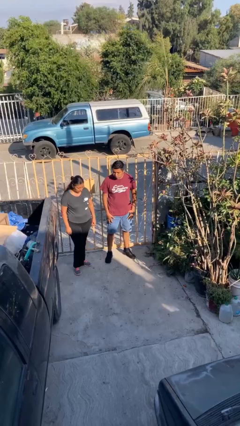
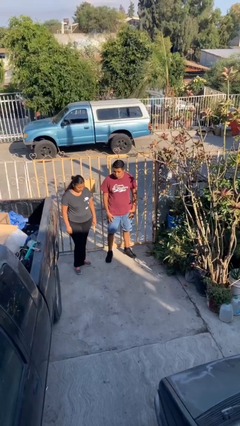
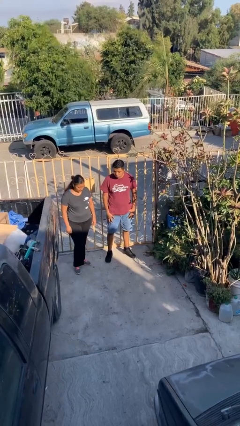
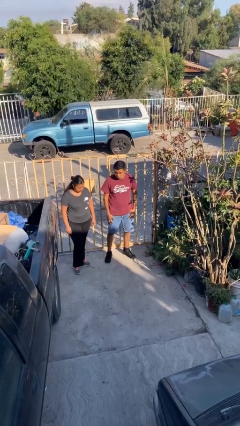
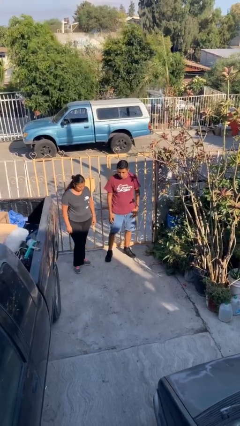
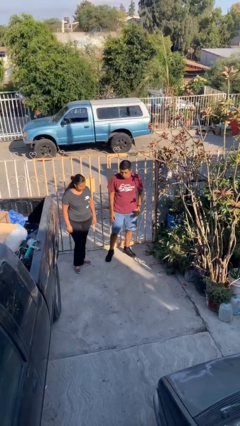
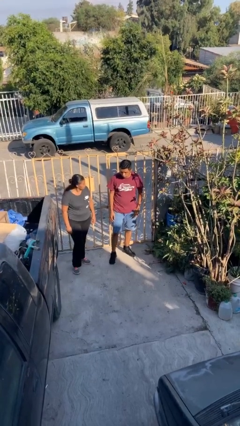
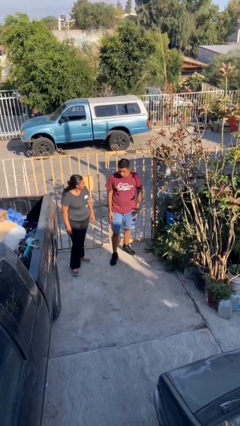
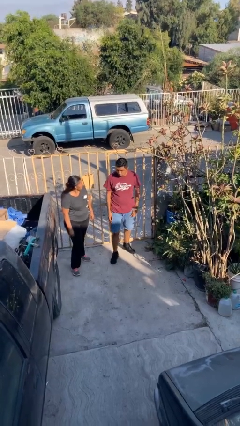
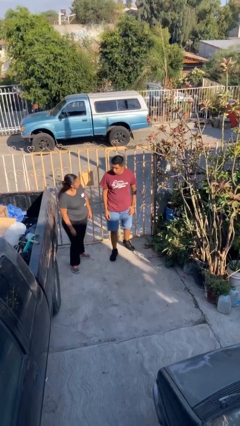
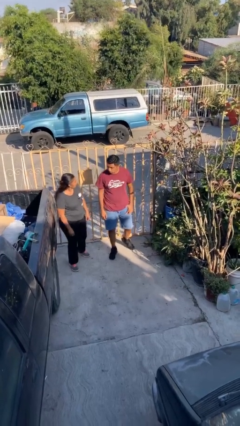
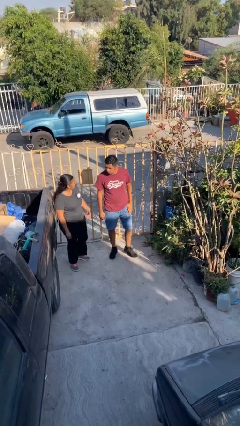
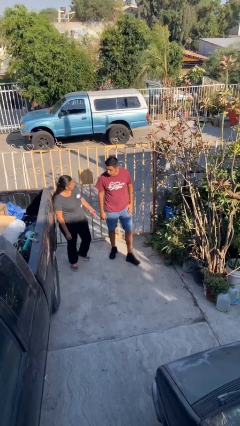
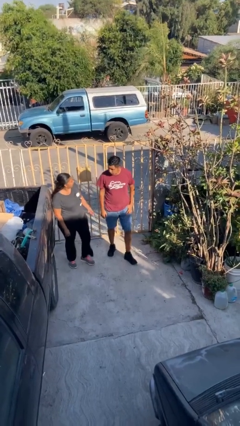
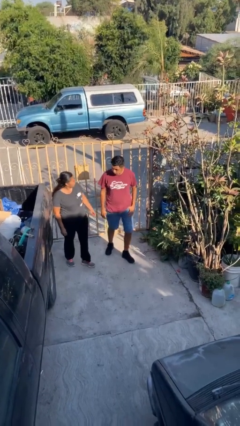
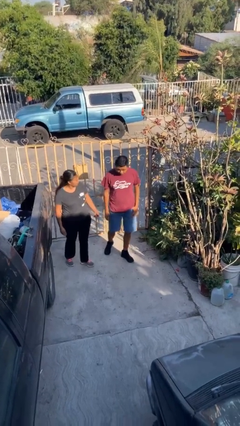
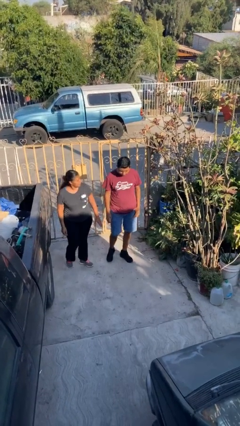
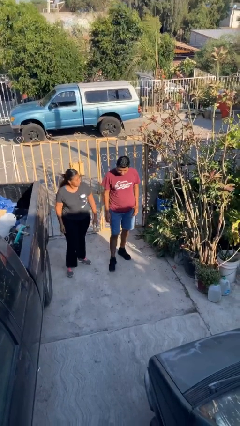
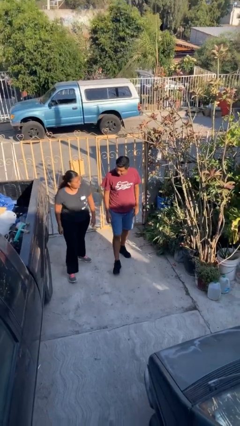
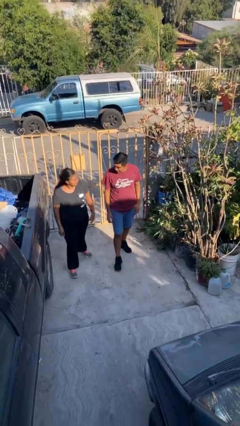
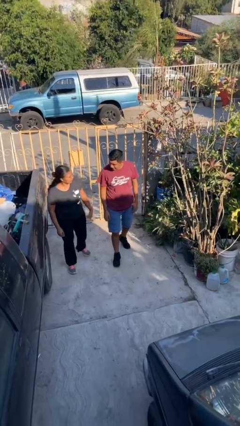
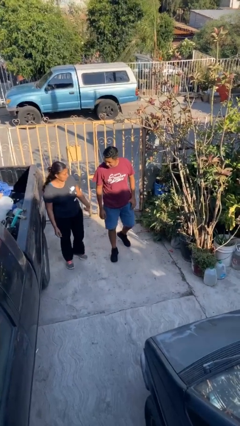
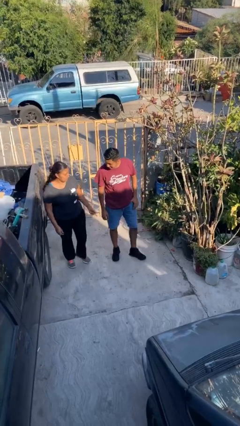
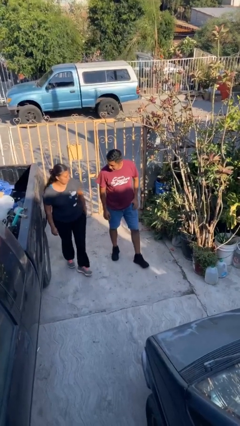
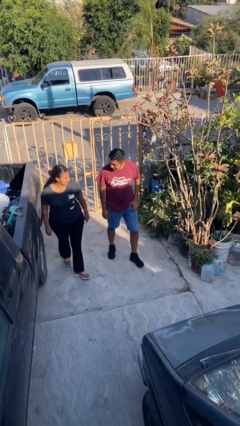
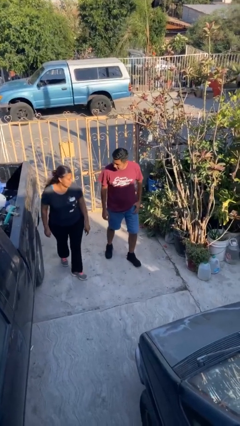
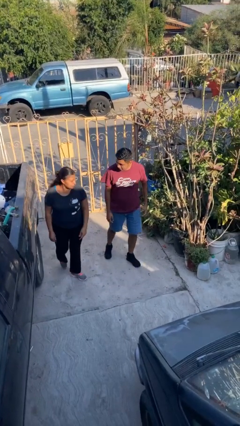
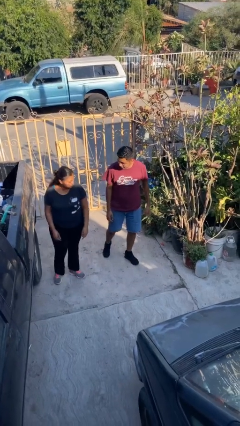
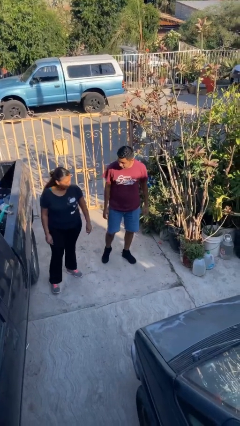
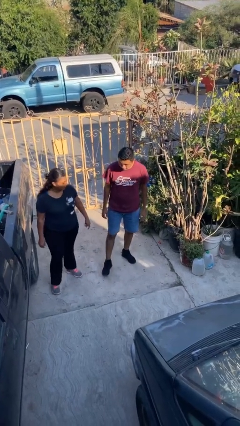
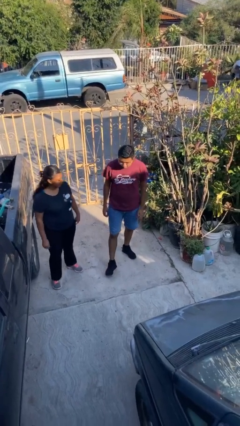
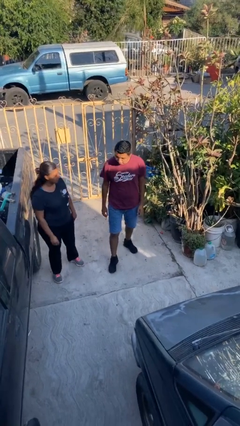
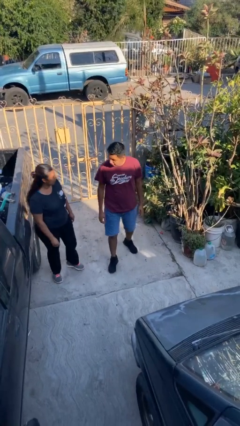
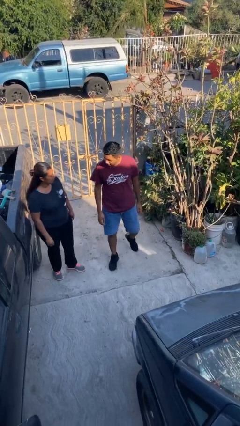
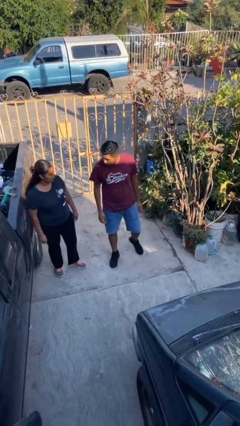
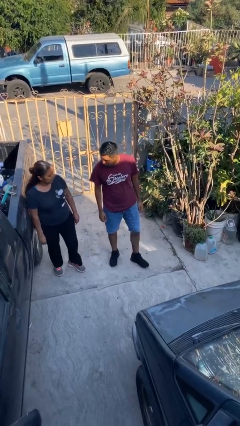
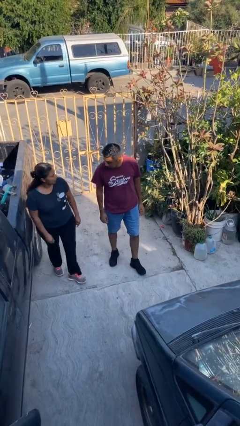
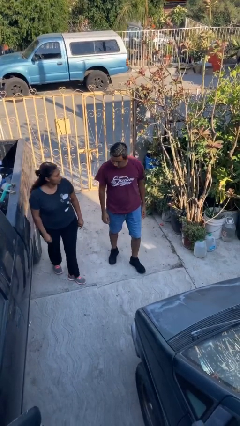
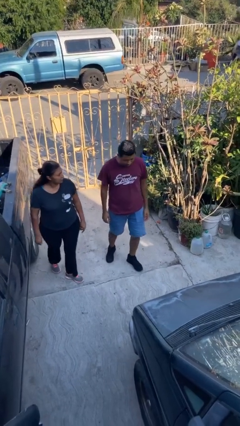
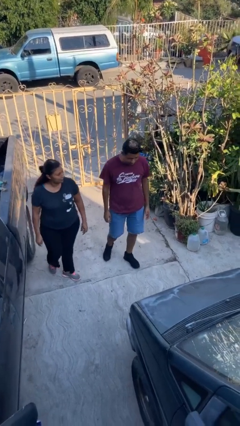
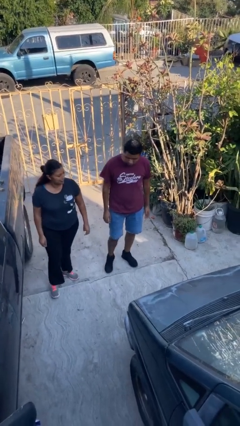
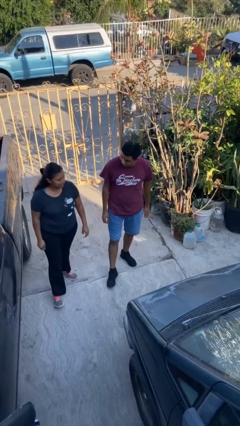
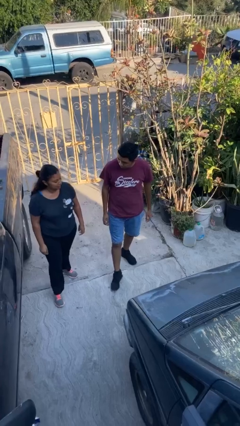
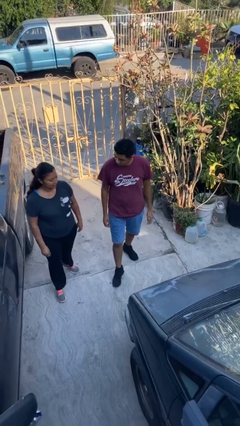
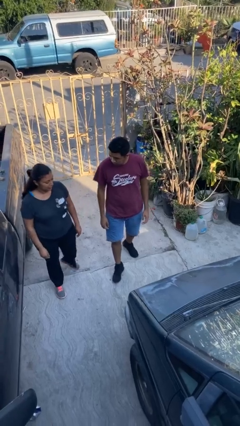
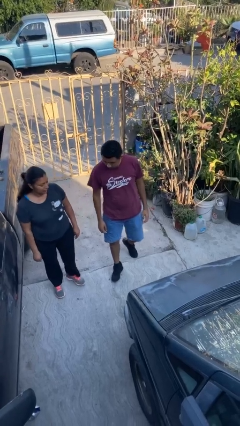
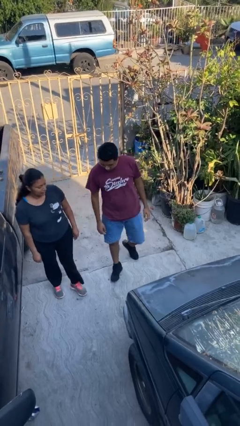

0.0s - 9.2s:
person talks to person

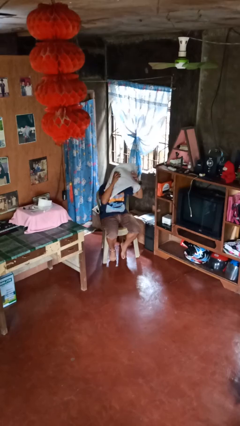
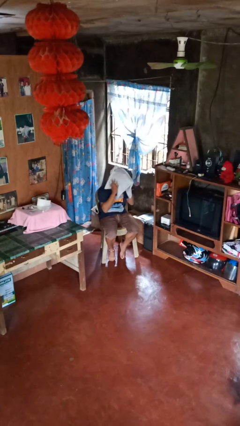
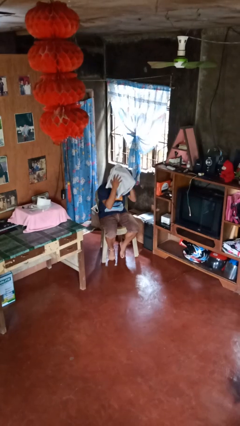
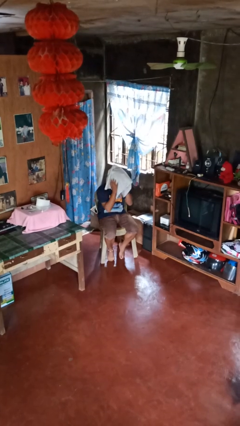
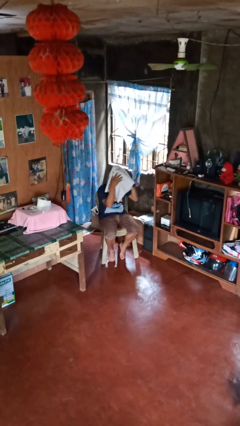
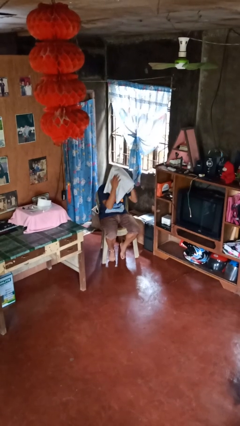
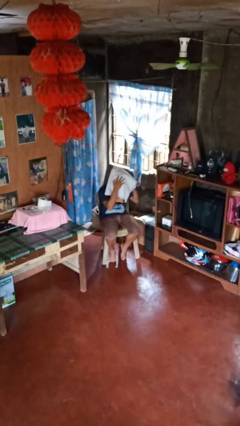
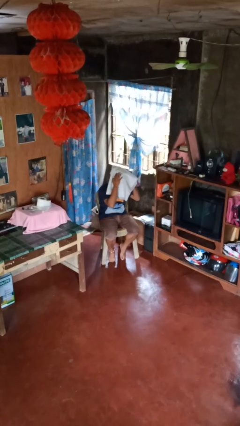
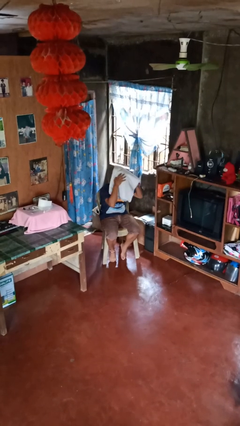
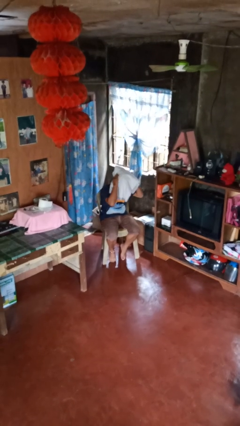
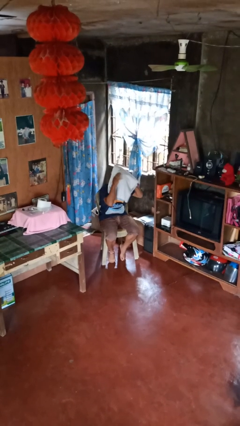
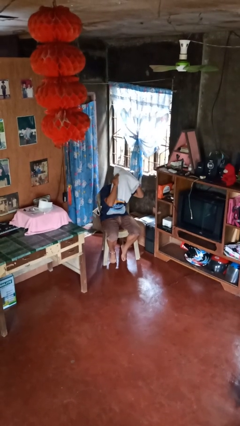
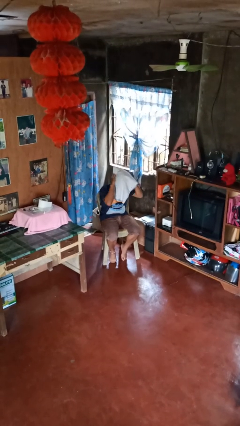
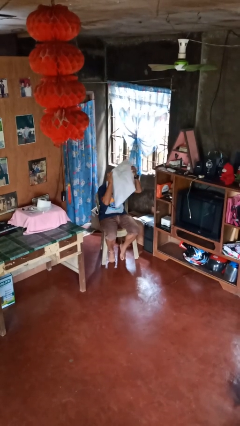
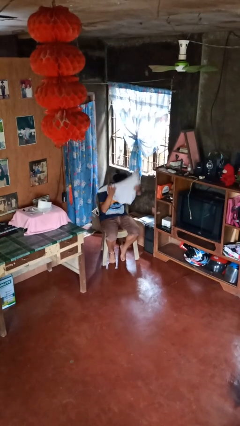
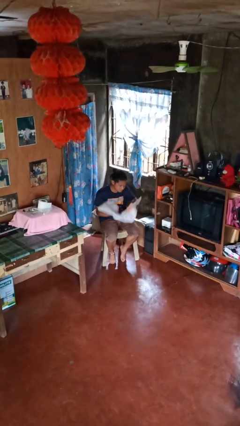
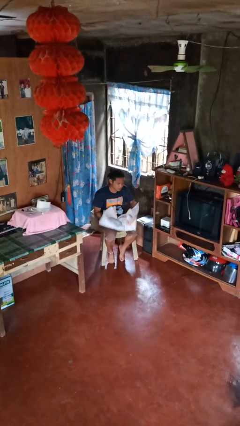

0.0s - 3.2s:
person dries hair with towel

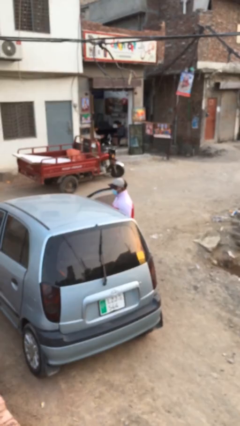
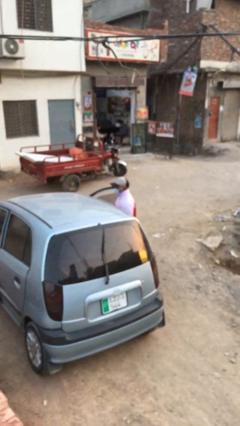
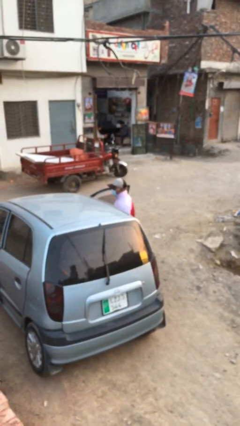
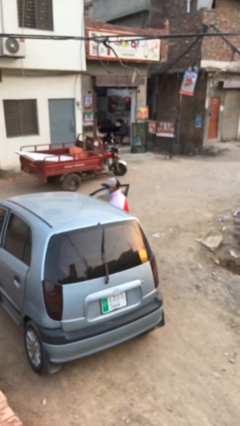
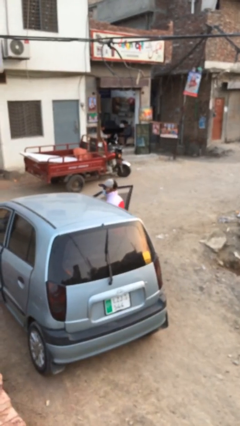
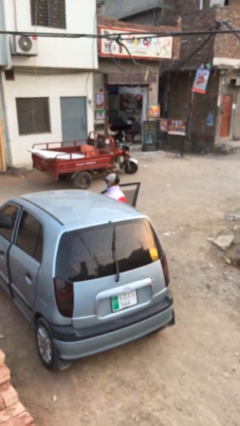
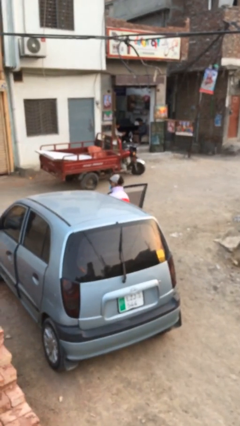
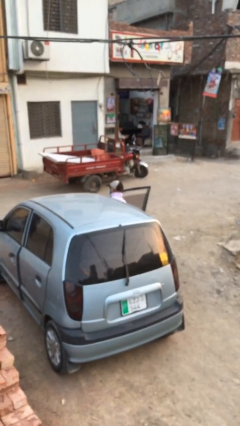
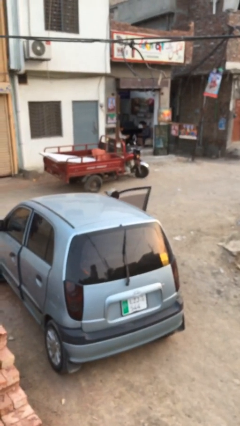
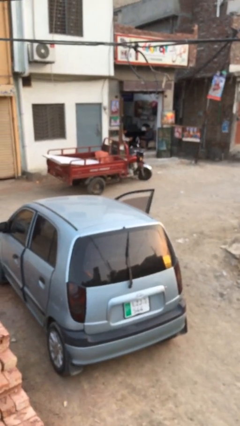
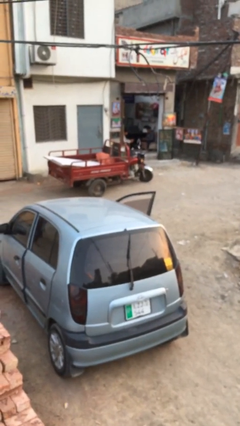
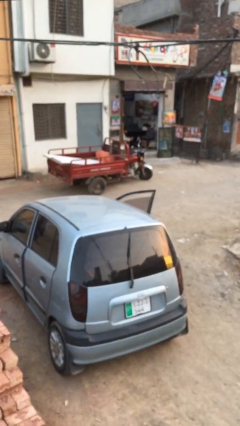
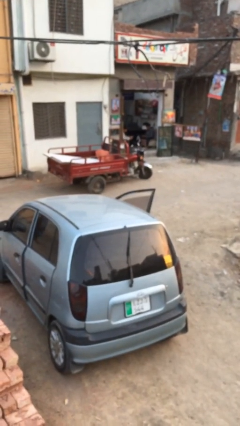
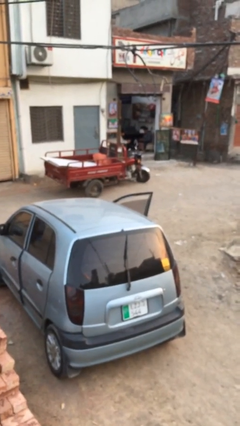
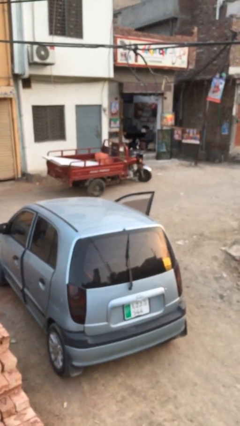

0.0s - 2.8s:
person enters car

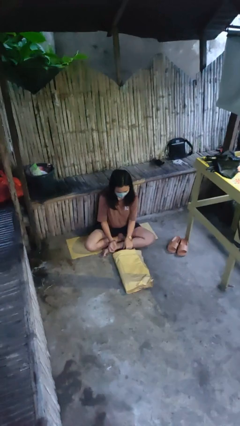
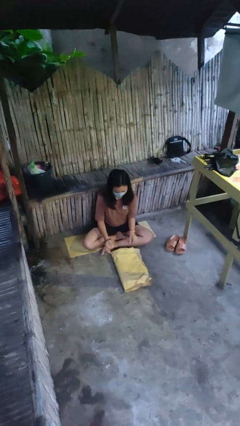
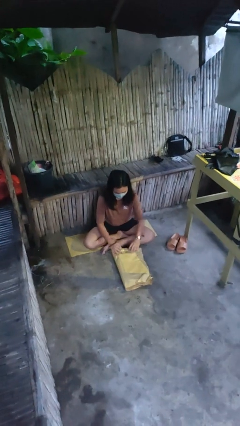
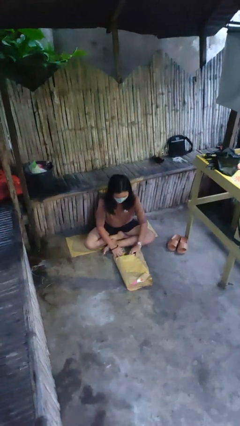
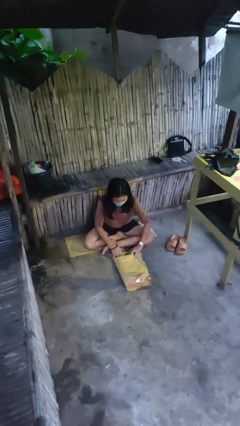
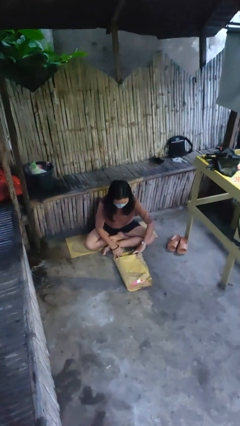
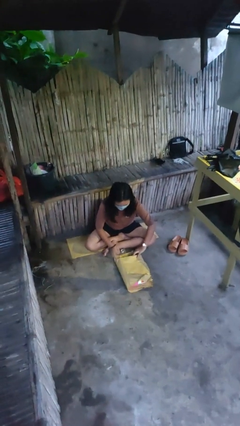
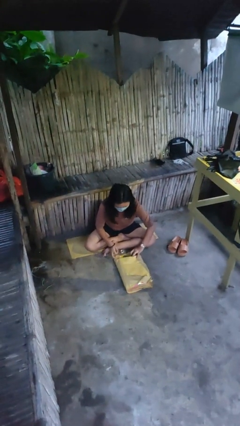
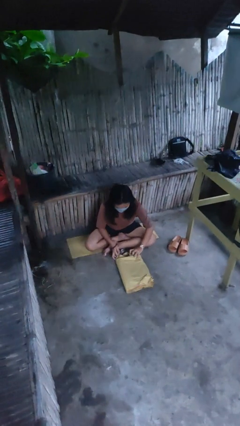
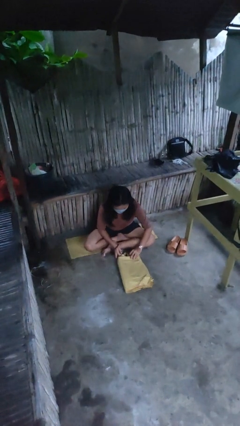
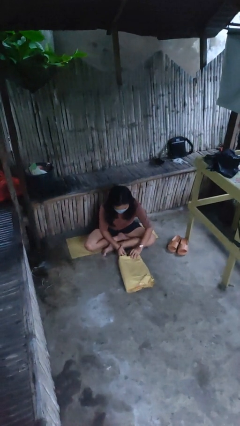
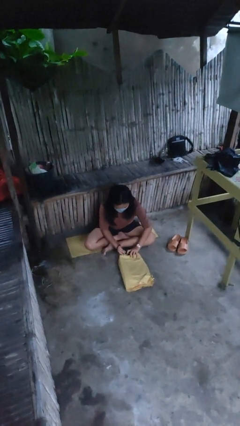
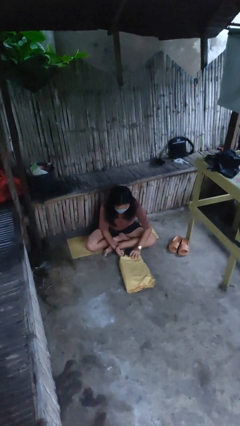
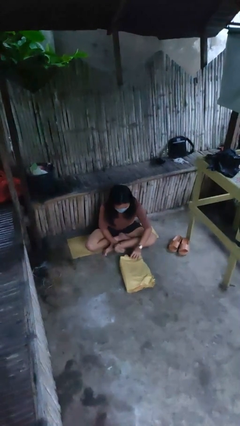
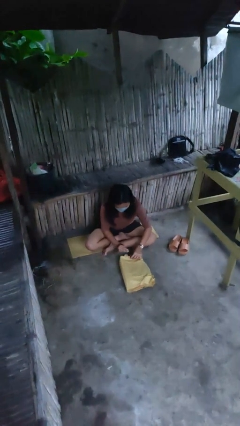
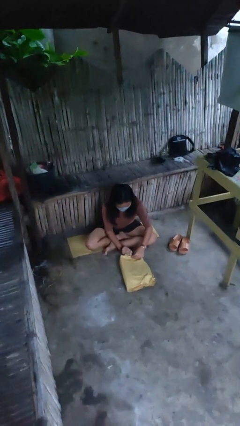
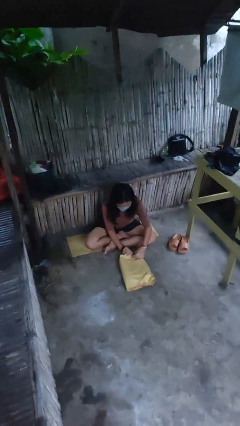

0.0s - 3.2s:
person wraps box
